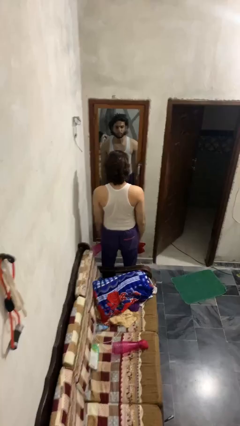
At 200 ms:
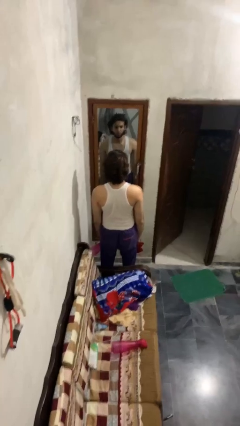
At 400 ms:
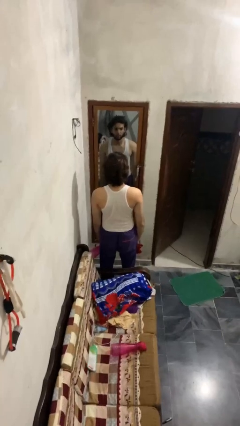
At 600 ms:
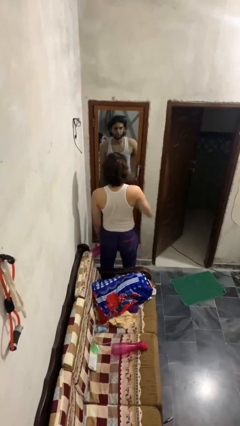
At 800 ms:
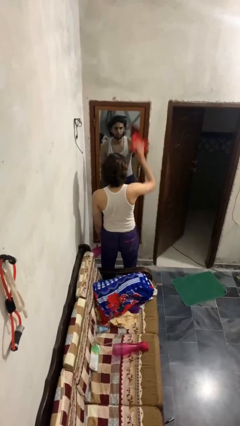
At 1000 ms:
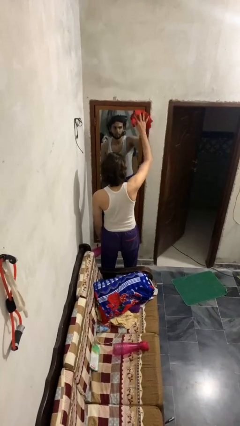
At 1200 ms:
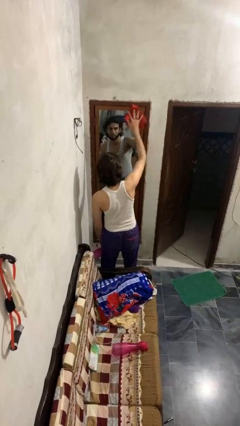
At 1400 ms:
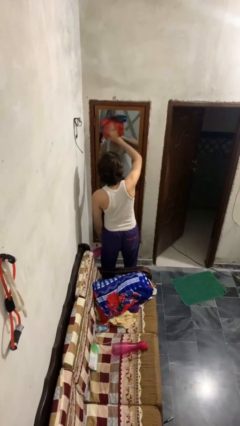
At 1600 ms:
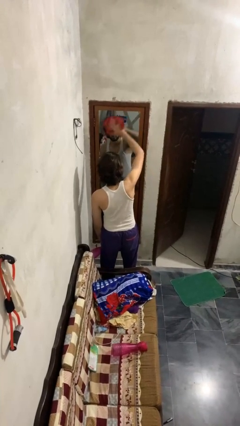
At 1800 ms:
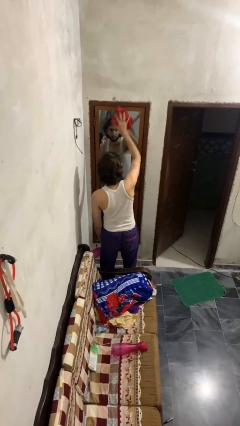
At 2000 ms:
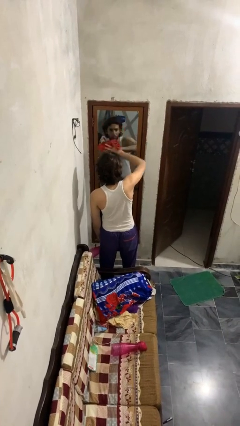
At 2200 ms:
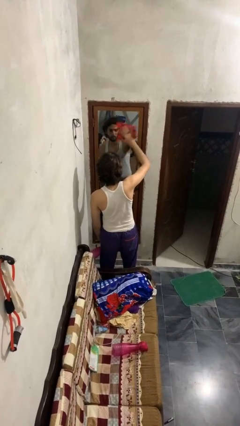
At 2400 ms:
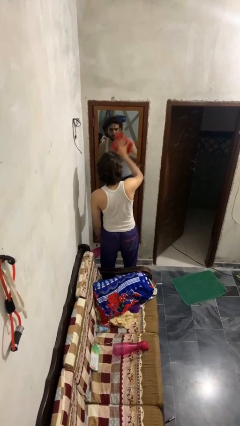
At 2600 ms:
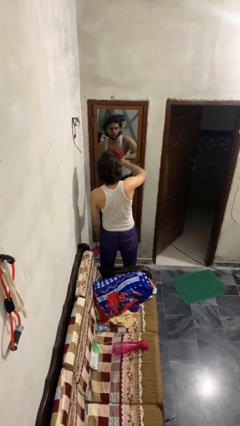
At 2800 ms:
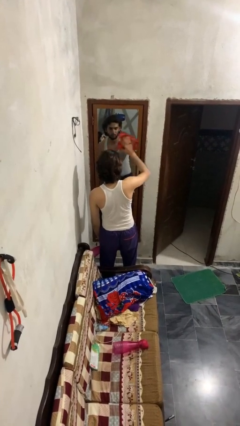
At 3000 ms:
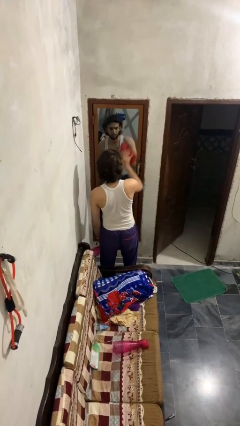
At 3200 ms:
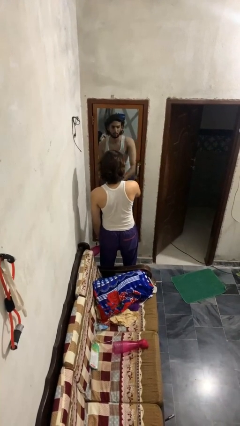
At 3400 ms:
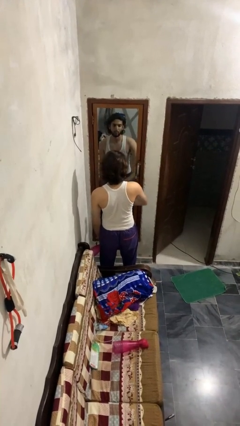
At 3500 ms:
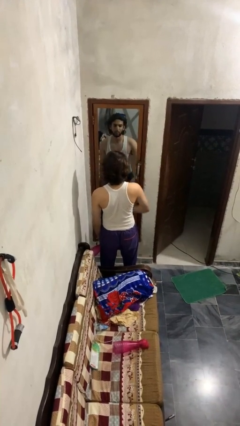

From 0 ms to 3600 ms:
person washes window

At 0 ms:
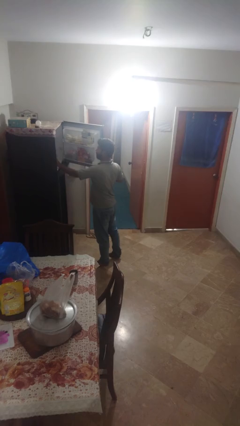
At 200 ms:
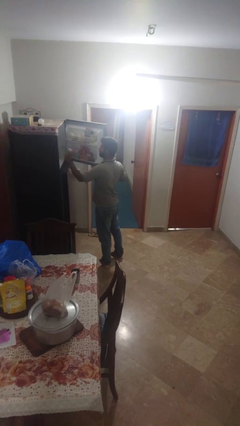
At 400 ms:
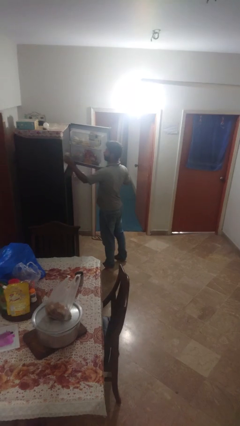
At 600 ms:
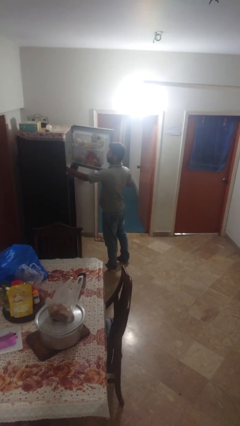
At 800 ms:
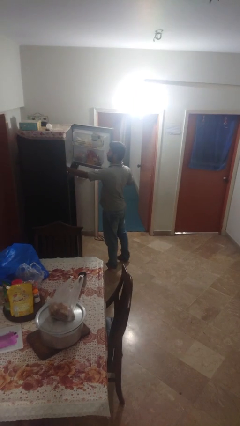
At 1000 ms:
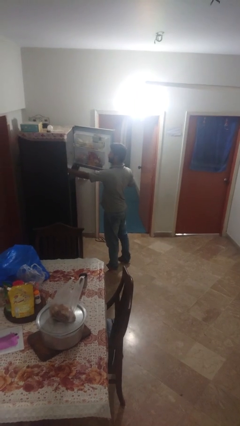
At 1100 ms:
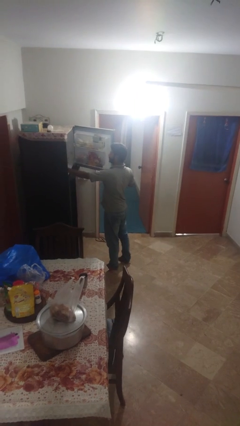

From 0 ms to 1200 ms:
person puts object into refrigerator

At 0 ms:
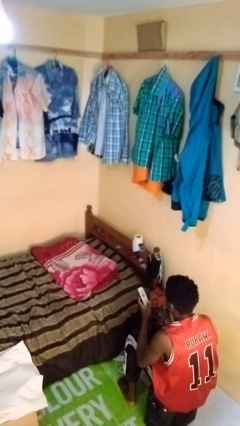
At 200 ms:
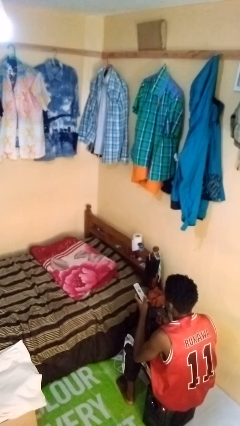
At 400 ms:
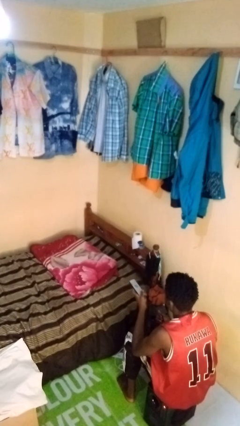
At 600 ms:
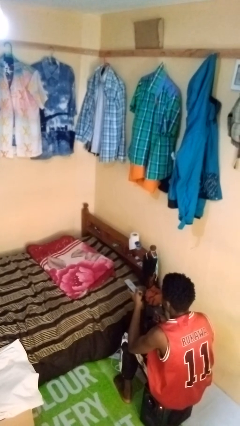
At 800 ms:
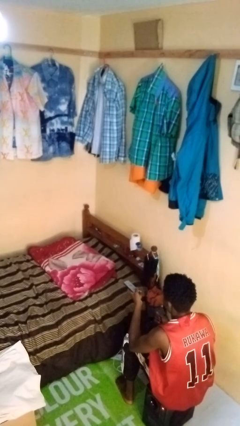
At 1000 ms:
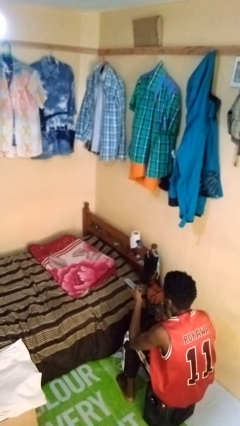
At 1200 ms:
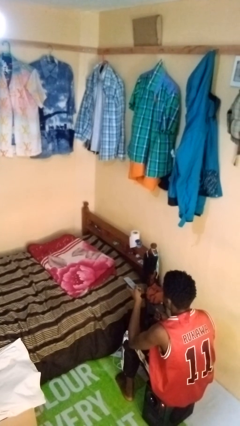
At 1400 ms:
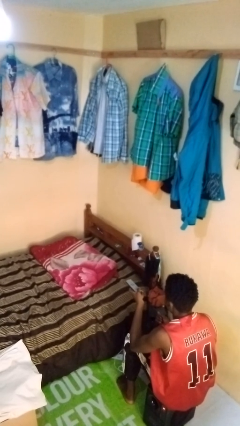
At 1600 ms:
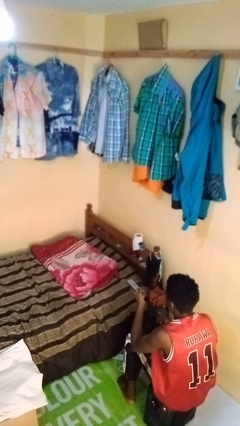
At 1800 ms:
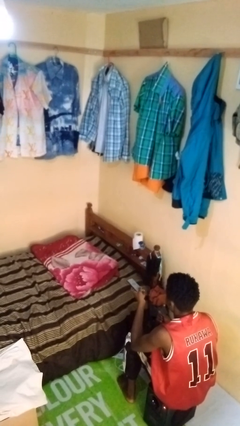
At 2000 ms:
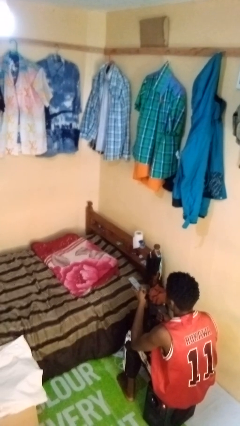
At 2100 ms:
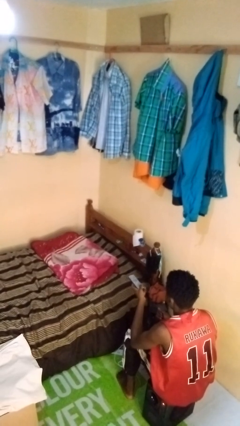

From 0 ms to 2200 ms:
person uses television remote

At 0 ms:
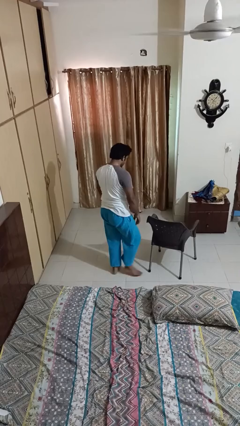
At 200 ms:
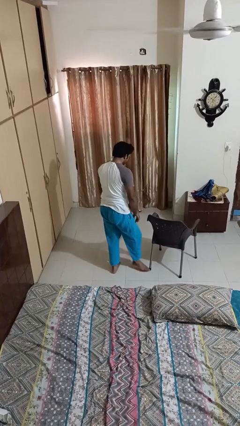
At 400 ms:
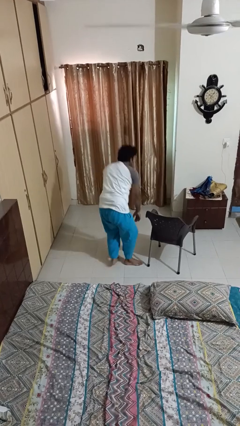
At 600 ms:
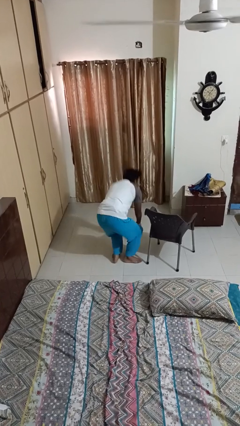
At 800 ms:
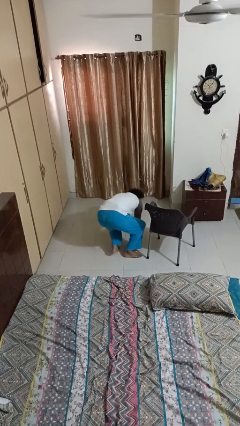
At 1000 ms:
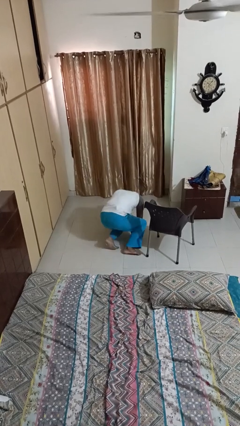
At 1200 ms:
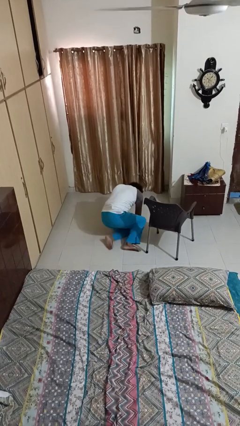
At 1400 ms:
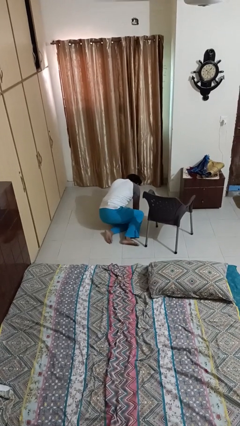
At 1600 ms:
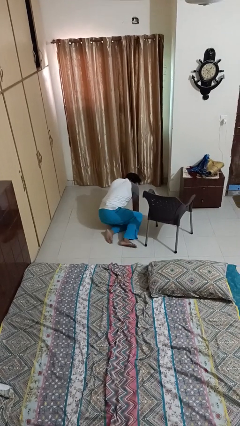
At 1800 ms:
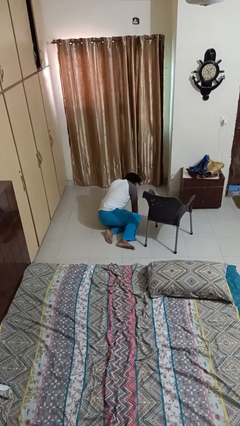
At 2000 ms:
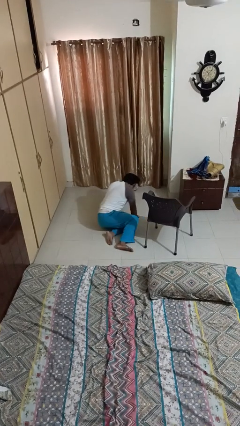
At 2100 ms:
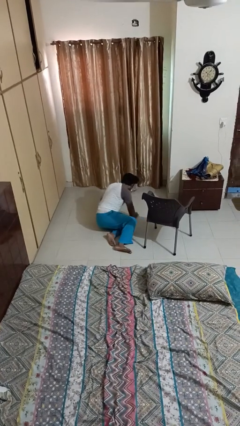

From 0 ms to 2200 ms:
person trips on object on floor

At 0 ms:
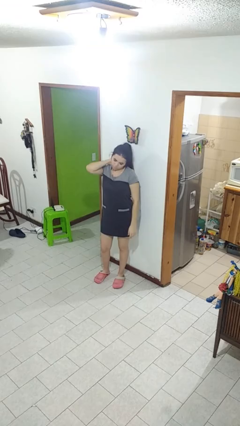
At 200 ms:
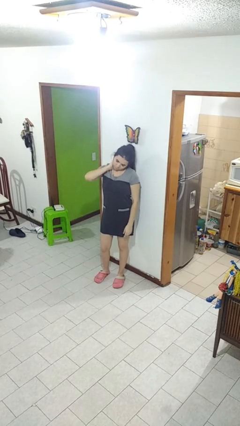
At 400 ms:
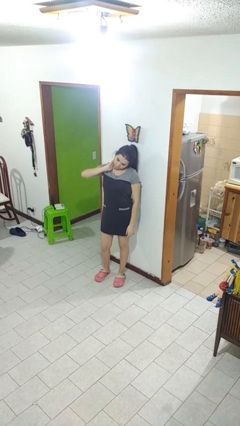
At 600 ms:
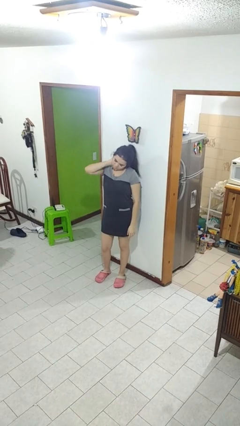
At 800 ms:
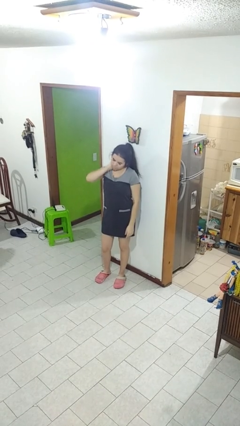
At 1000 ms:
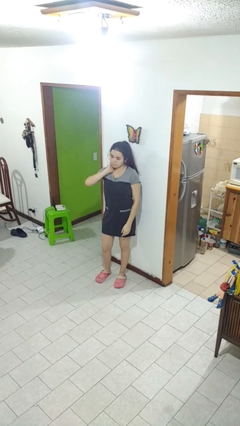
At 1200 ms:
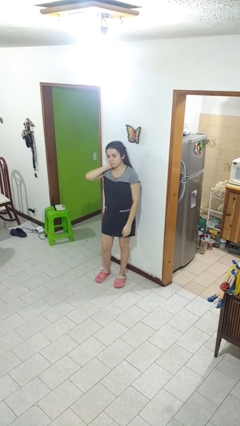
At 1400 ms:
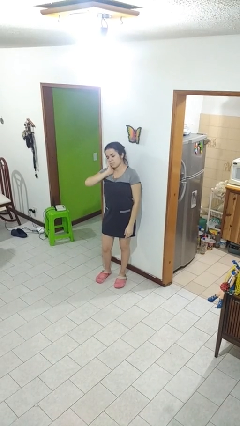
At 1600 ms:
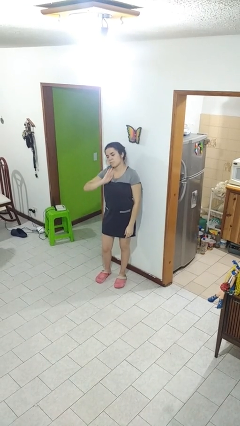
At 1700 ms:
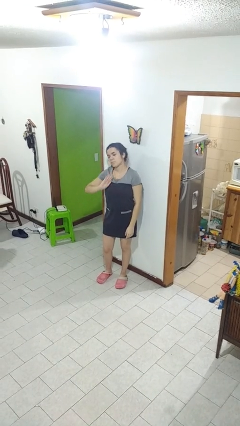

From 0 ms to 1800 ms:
person rubs neck

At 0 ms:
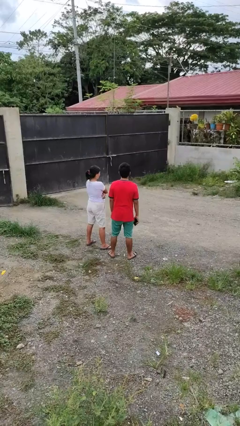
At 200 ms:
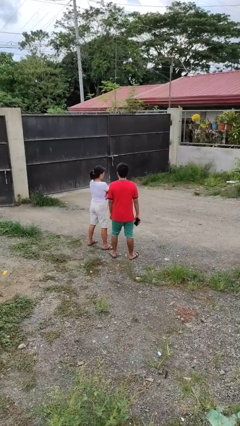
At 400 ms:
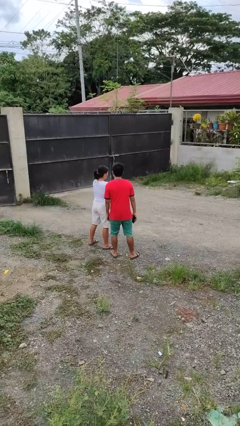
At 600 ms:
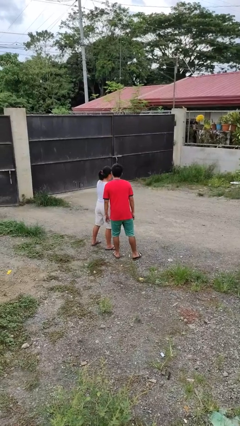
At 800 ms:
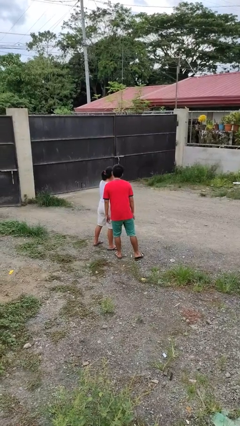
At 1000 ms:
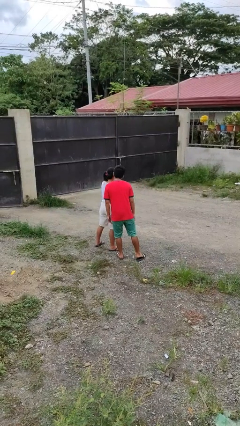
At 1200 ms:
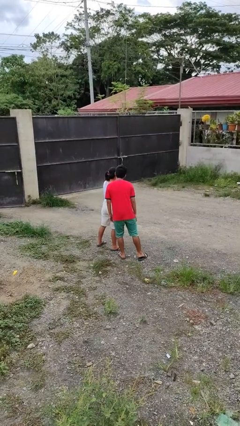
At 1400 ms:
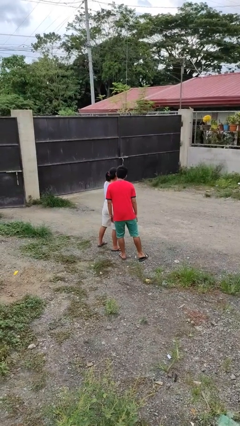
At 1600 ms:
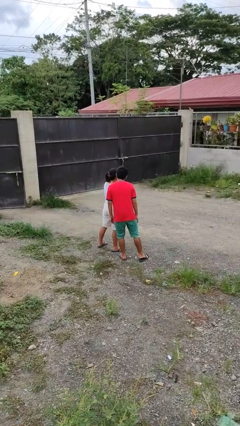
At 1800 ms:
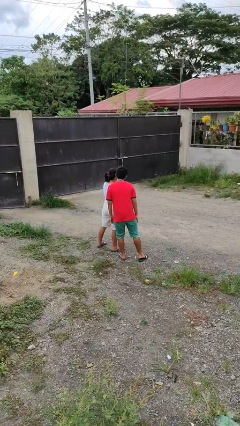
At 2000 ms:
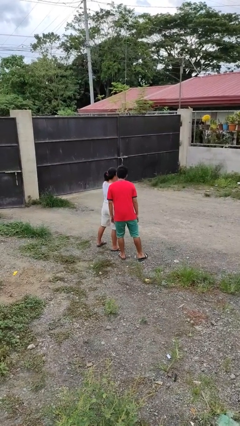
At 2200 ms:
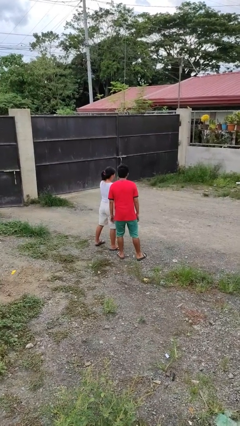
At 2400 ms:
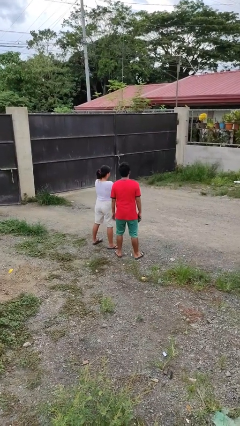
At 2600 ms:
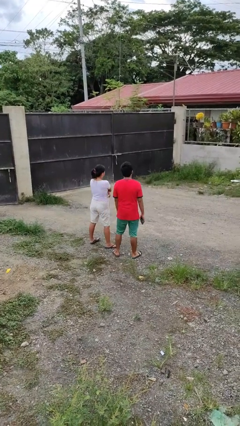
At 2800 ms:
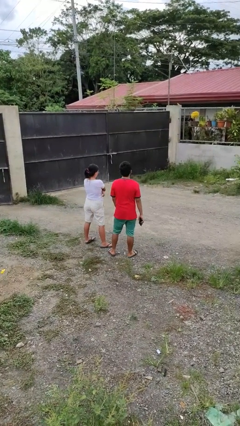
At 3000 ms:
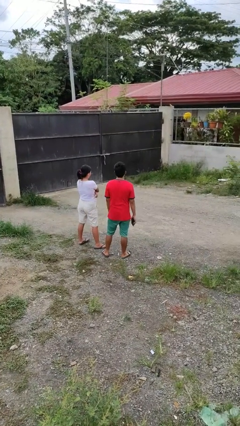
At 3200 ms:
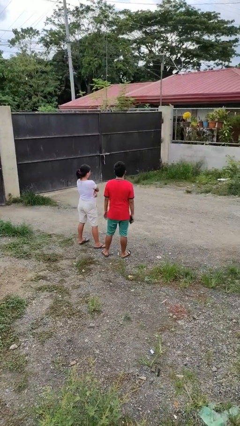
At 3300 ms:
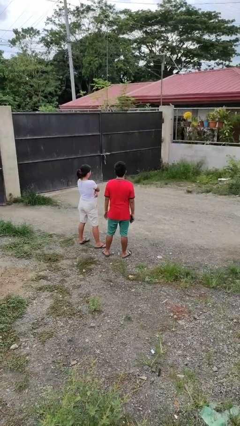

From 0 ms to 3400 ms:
person kisses cheek of person

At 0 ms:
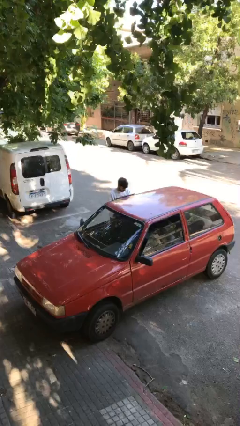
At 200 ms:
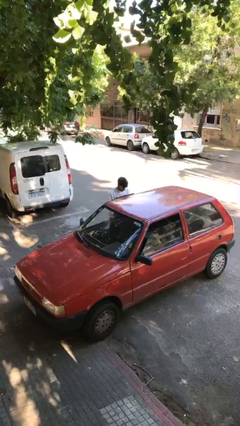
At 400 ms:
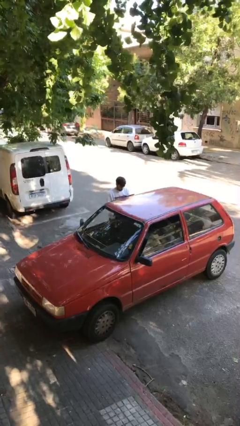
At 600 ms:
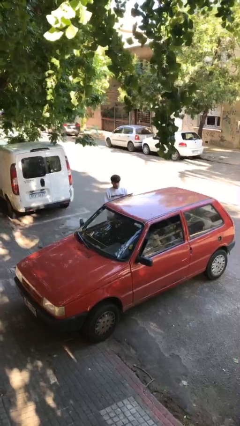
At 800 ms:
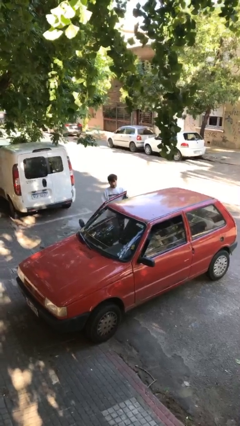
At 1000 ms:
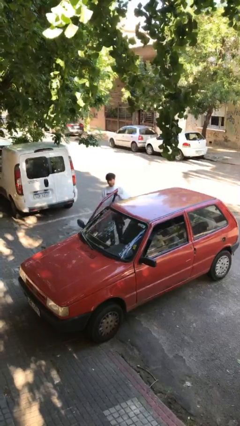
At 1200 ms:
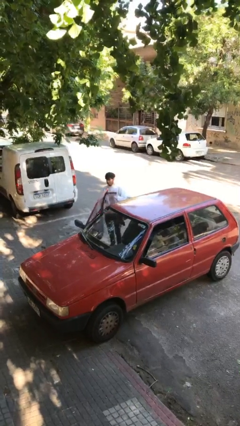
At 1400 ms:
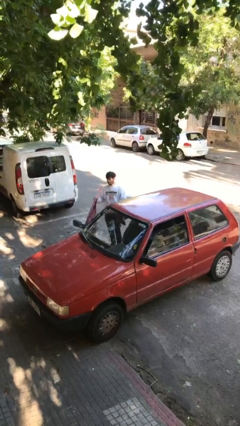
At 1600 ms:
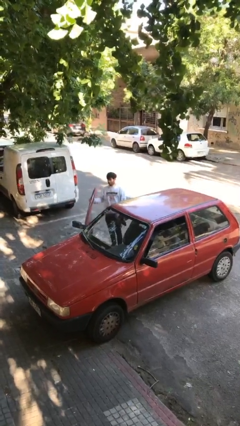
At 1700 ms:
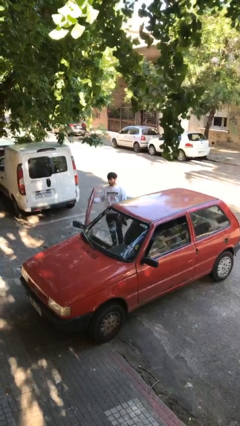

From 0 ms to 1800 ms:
person opens car door

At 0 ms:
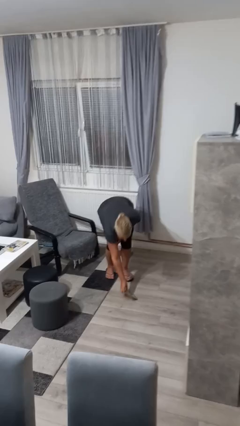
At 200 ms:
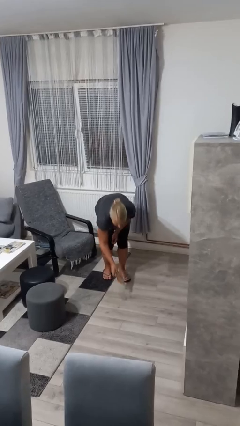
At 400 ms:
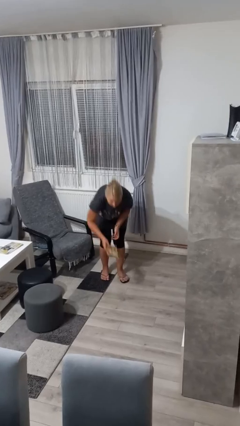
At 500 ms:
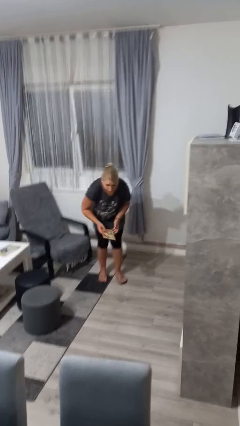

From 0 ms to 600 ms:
person picks up object from floor
